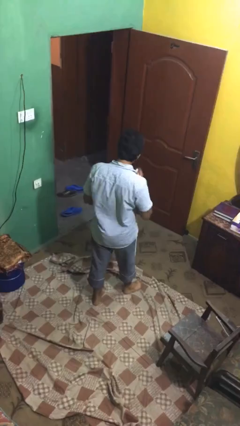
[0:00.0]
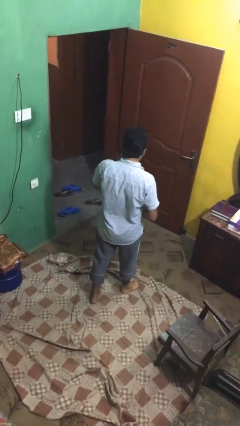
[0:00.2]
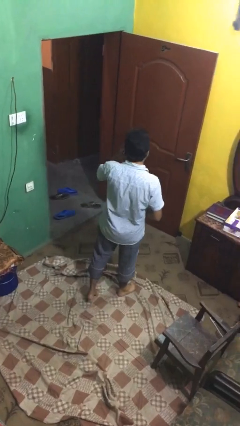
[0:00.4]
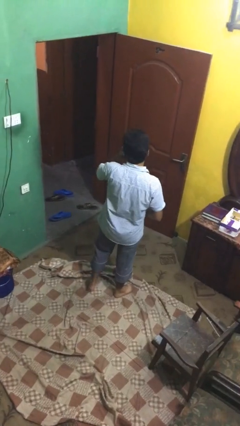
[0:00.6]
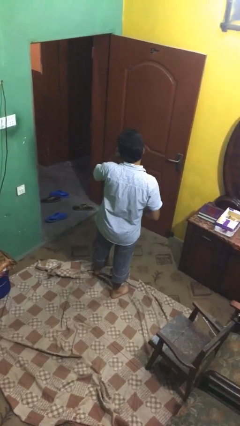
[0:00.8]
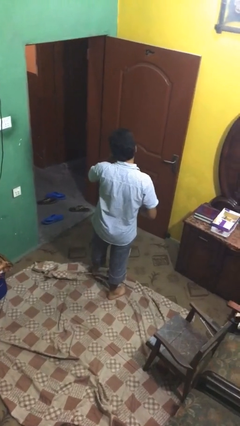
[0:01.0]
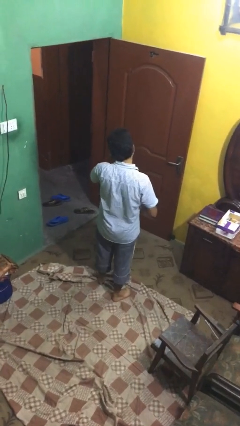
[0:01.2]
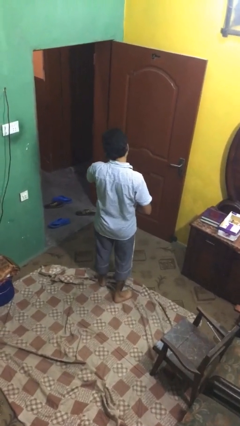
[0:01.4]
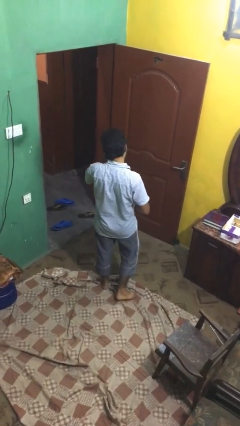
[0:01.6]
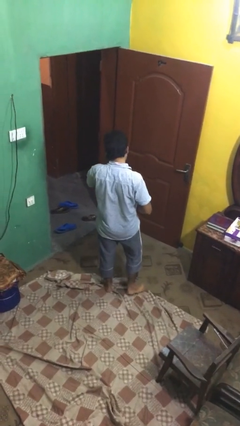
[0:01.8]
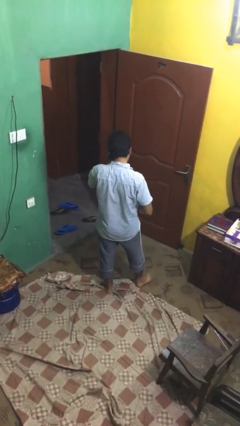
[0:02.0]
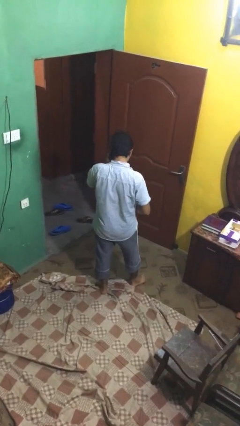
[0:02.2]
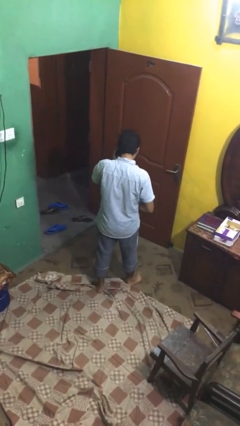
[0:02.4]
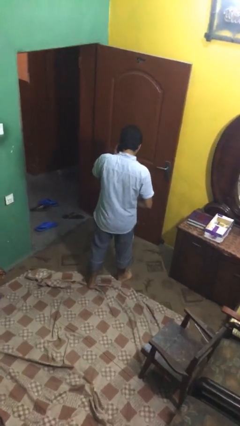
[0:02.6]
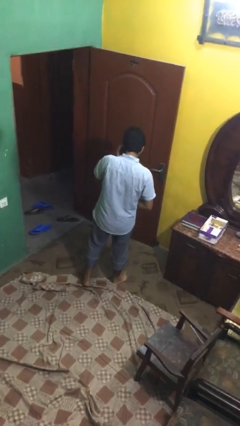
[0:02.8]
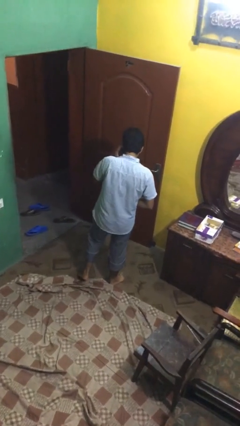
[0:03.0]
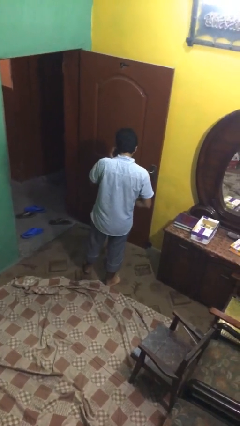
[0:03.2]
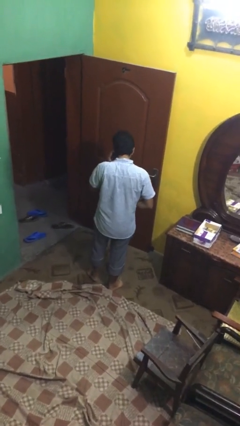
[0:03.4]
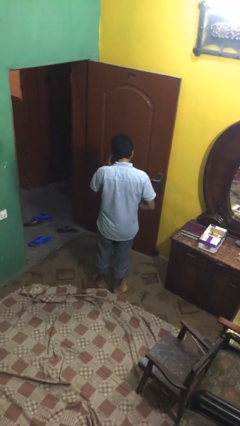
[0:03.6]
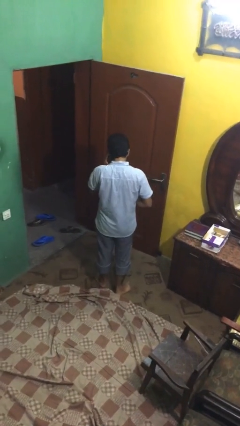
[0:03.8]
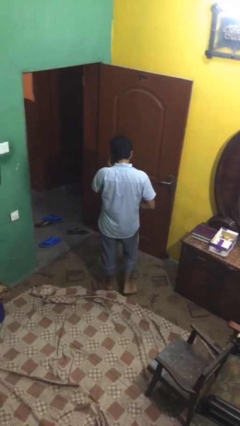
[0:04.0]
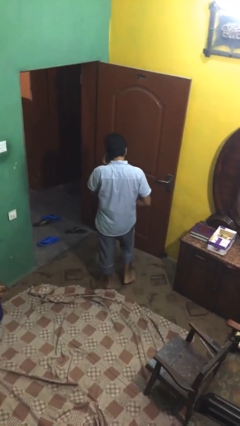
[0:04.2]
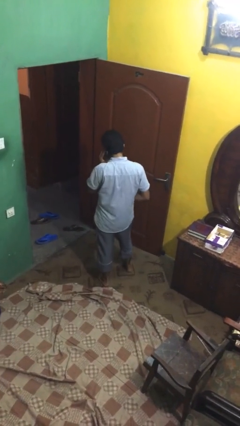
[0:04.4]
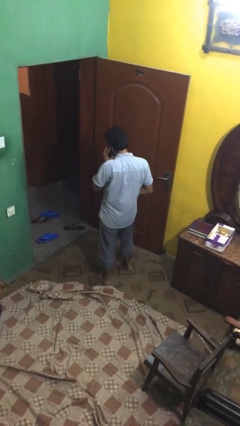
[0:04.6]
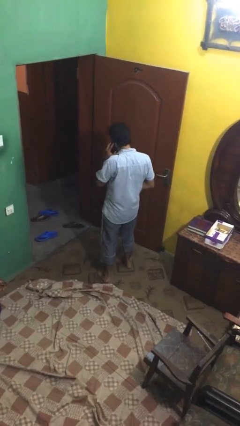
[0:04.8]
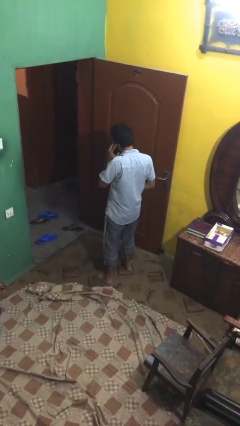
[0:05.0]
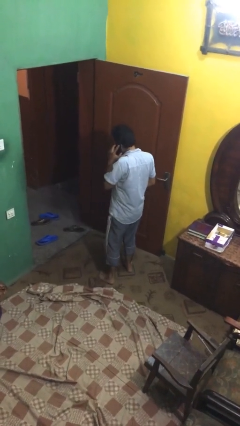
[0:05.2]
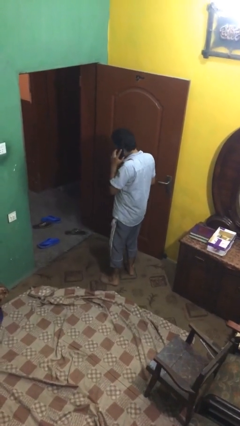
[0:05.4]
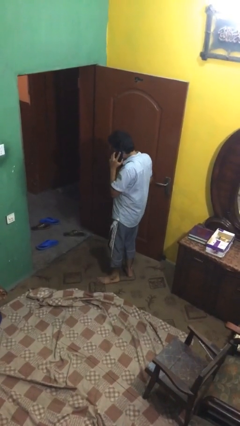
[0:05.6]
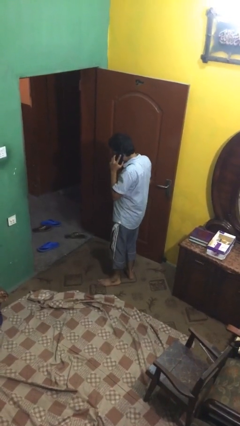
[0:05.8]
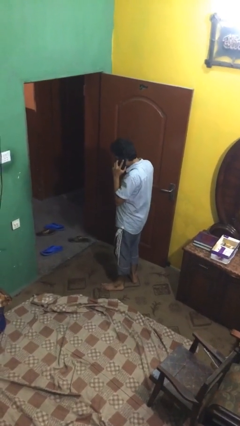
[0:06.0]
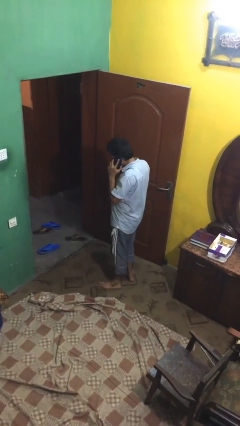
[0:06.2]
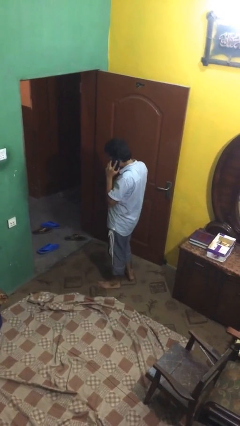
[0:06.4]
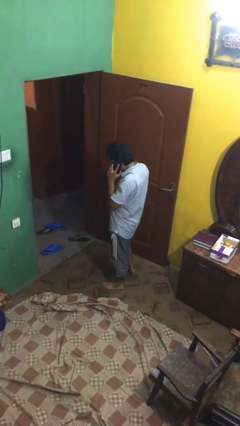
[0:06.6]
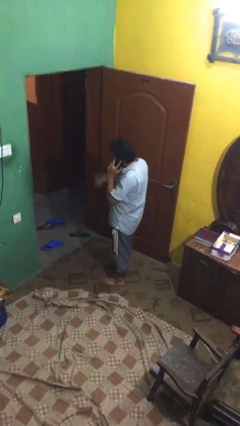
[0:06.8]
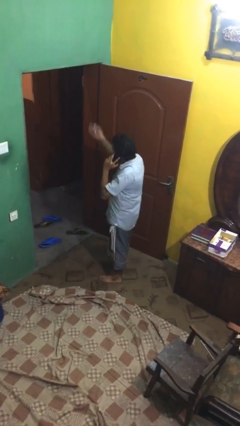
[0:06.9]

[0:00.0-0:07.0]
person talks on phone

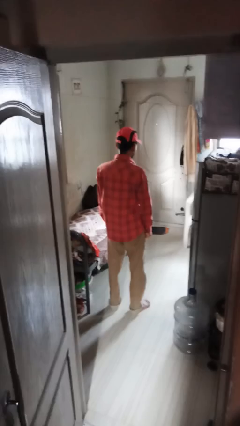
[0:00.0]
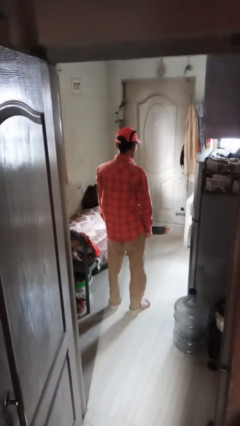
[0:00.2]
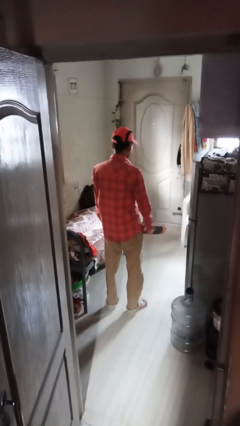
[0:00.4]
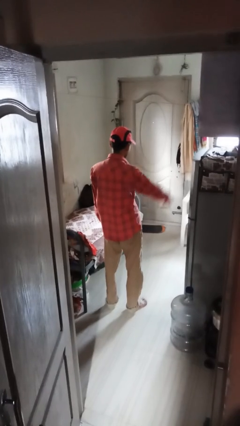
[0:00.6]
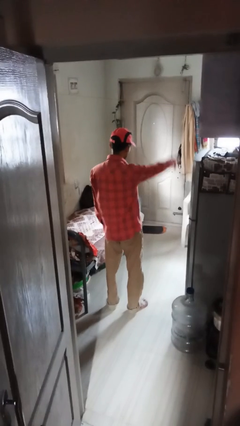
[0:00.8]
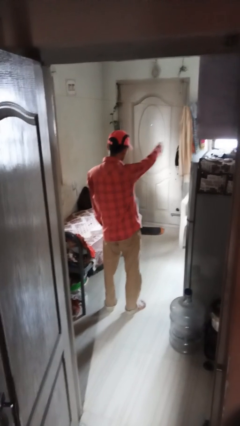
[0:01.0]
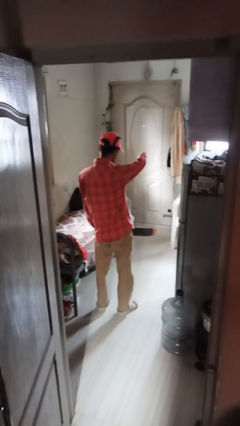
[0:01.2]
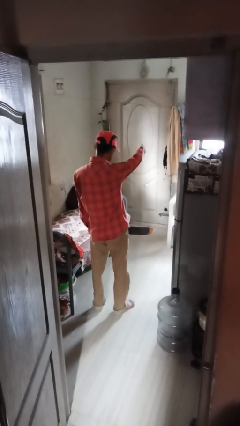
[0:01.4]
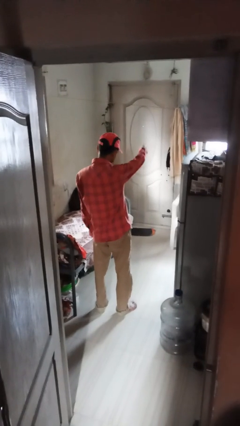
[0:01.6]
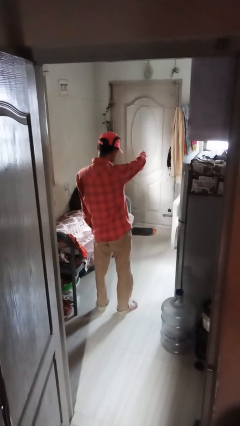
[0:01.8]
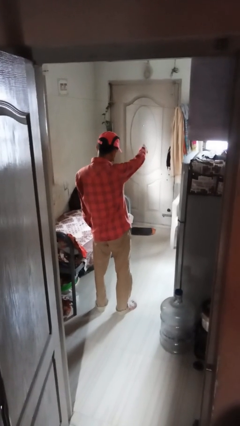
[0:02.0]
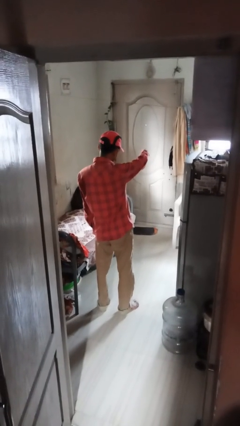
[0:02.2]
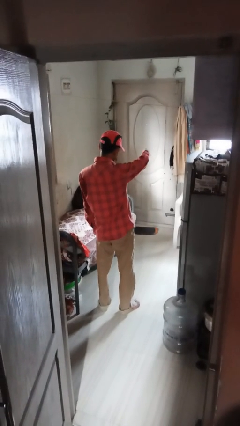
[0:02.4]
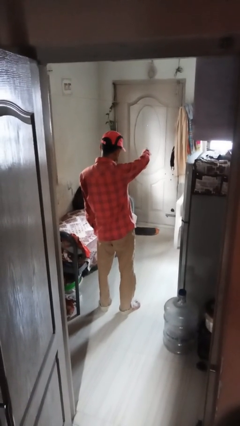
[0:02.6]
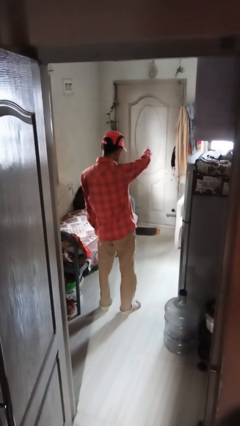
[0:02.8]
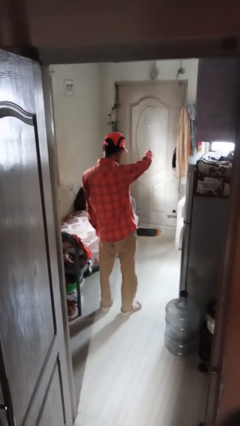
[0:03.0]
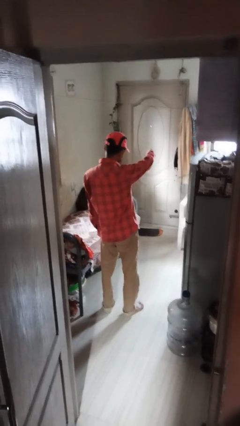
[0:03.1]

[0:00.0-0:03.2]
person gestures thumbs down

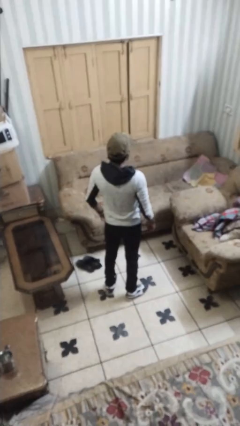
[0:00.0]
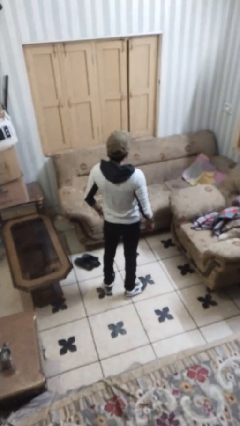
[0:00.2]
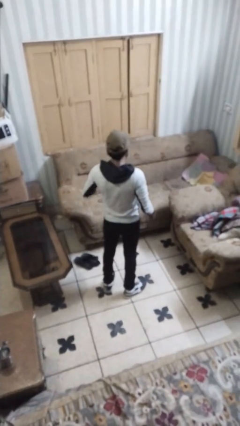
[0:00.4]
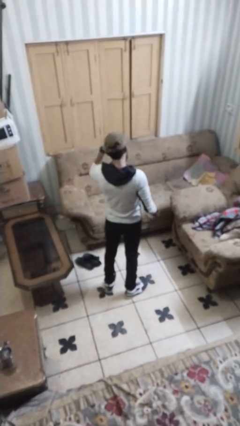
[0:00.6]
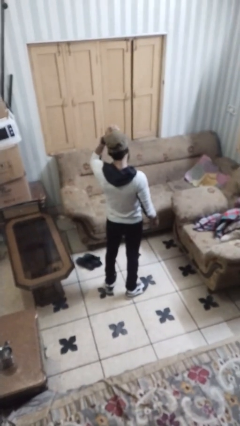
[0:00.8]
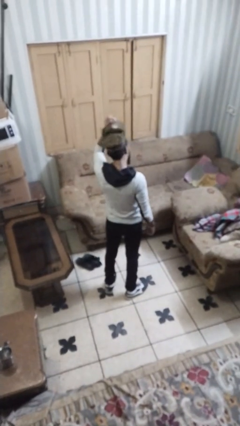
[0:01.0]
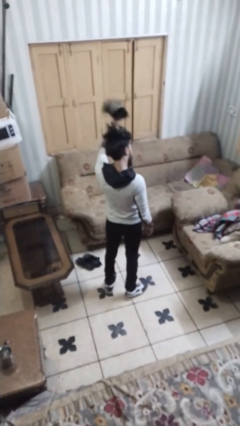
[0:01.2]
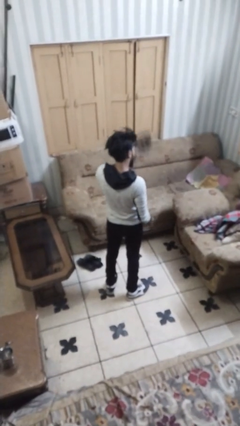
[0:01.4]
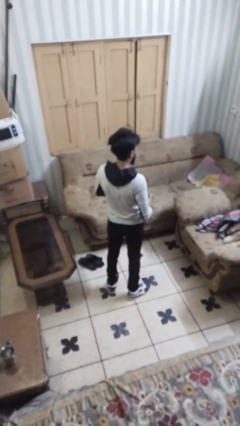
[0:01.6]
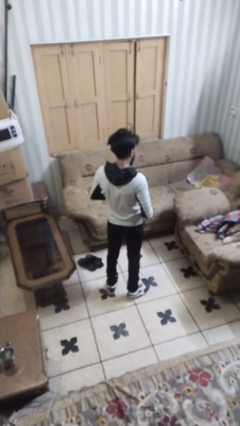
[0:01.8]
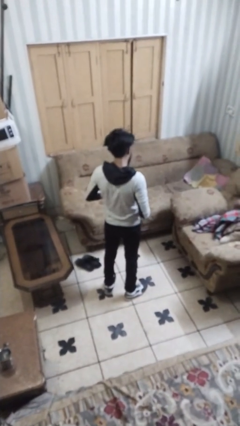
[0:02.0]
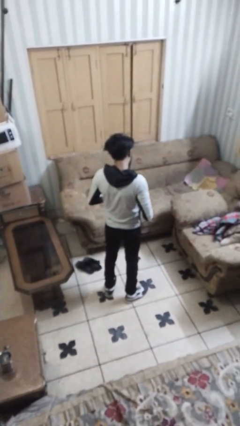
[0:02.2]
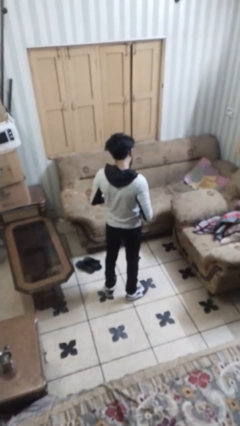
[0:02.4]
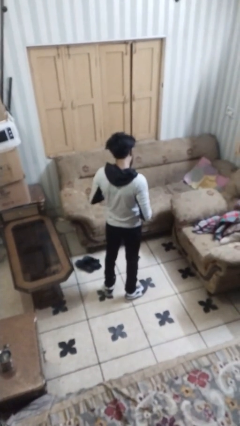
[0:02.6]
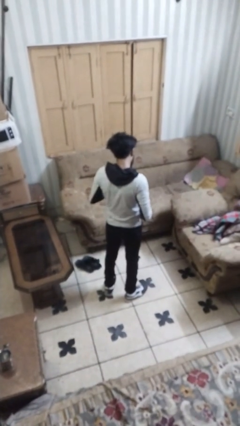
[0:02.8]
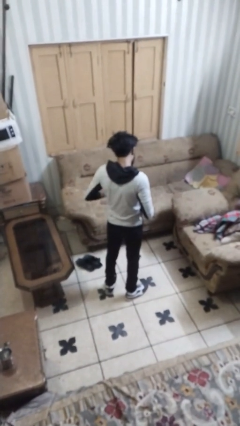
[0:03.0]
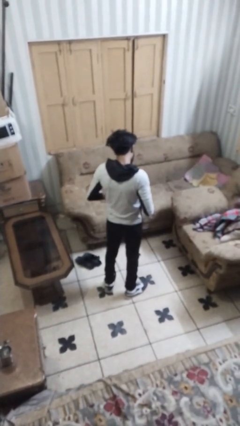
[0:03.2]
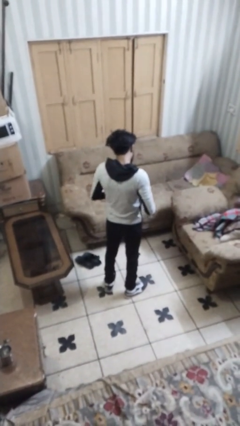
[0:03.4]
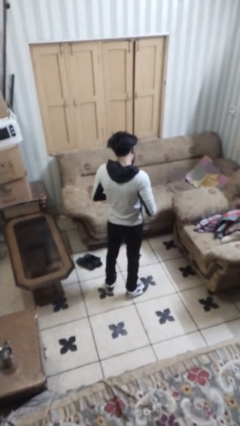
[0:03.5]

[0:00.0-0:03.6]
person takes off hat

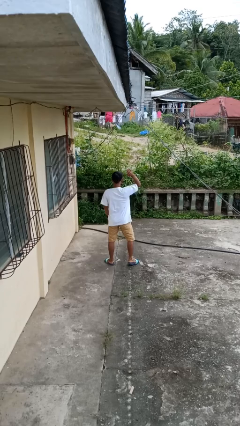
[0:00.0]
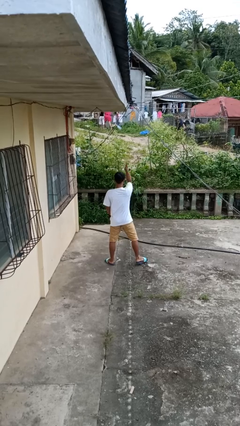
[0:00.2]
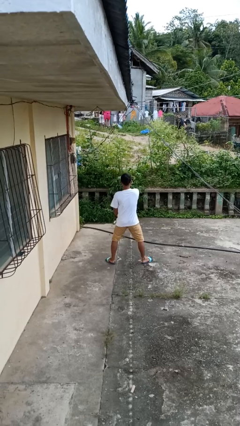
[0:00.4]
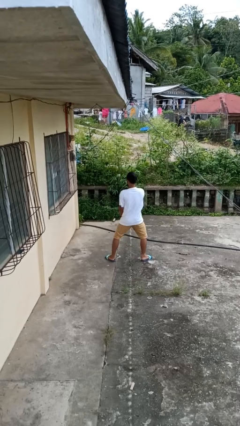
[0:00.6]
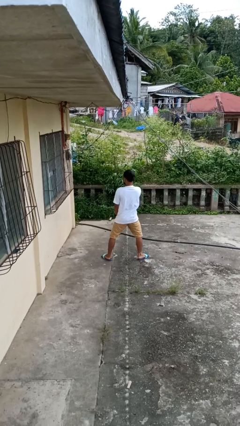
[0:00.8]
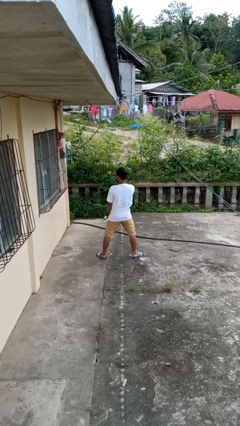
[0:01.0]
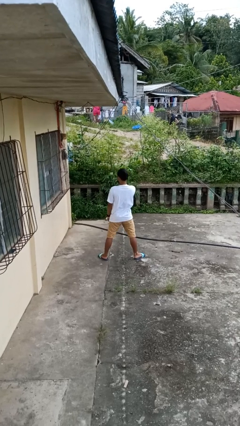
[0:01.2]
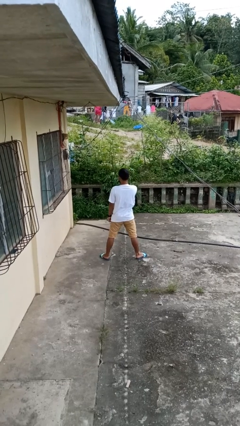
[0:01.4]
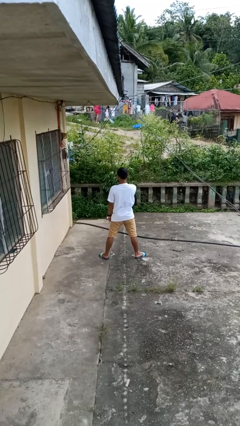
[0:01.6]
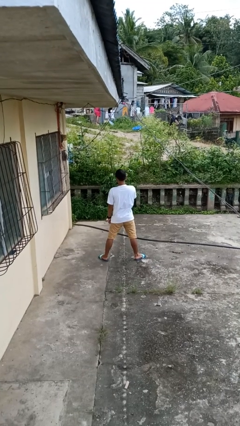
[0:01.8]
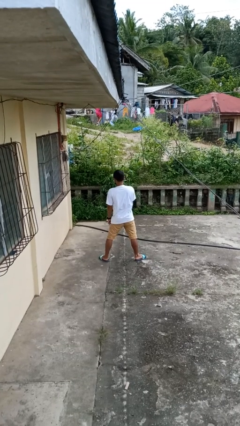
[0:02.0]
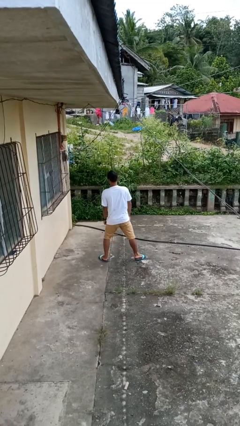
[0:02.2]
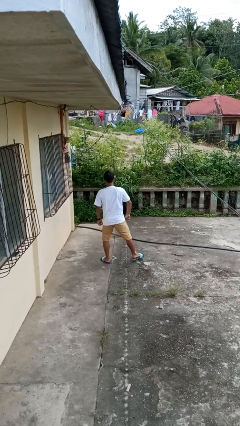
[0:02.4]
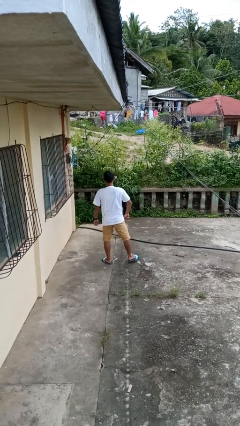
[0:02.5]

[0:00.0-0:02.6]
person karate chop

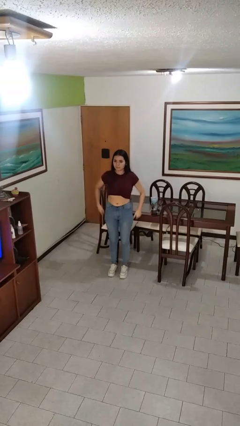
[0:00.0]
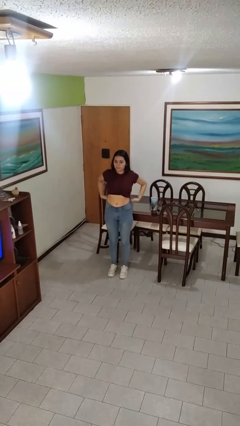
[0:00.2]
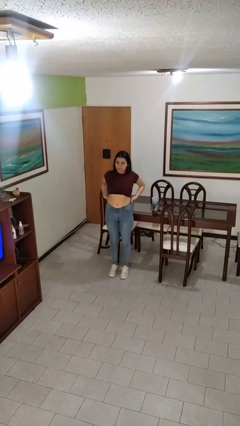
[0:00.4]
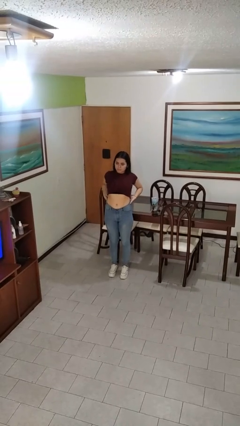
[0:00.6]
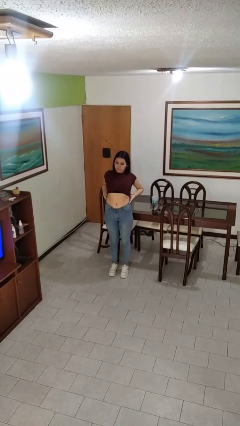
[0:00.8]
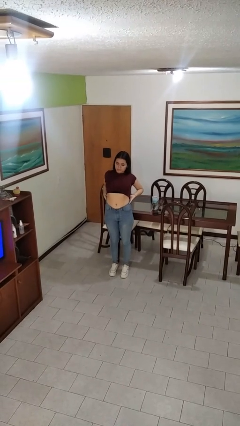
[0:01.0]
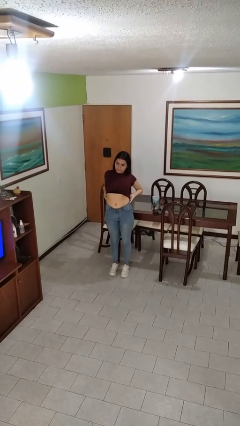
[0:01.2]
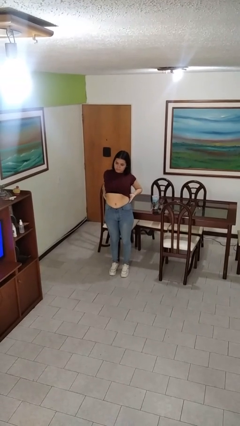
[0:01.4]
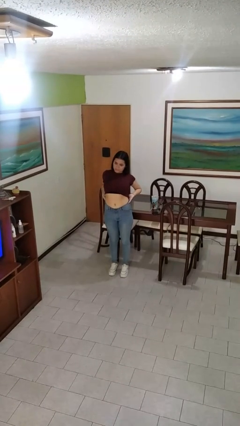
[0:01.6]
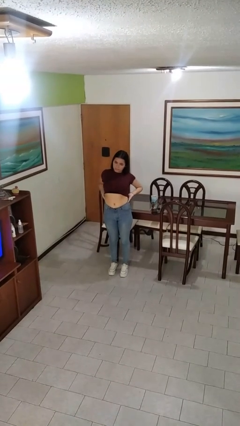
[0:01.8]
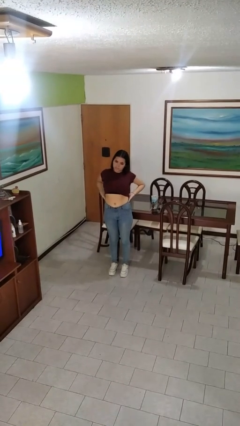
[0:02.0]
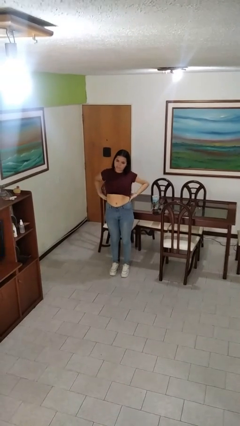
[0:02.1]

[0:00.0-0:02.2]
person stretches back
